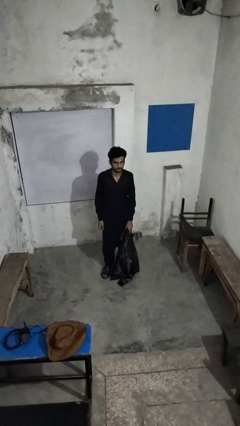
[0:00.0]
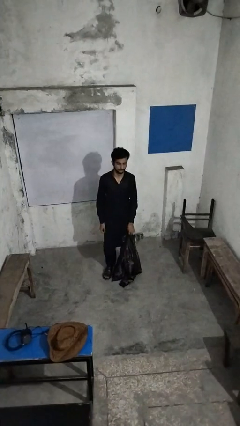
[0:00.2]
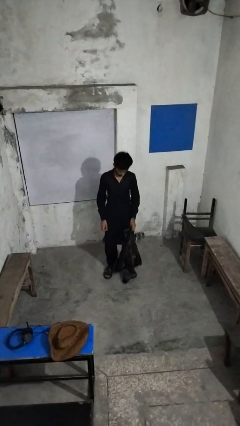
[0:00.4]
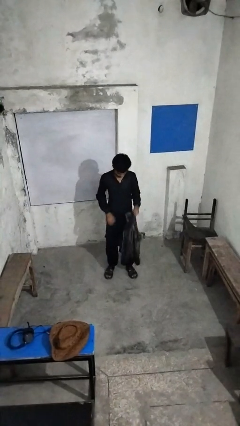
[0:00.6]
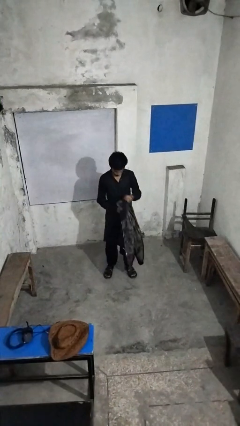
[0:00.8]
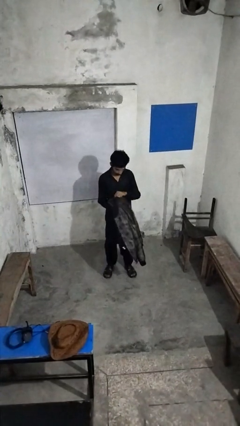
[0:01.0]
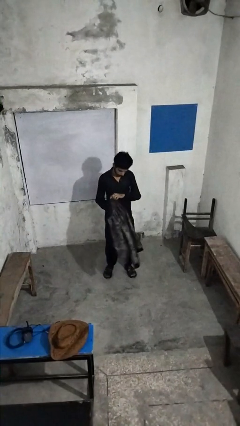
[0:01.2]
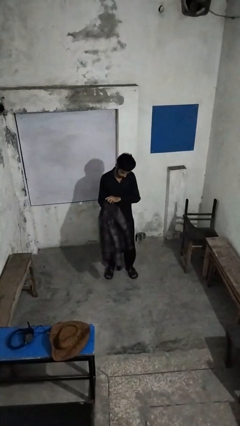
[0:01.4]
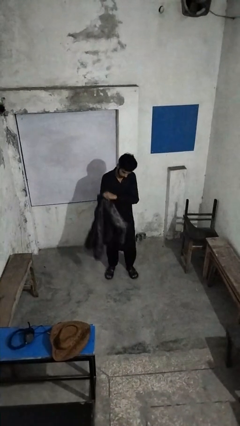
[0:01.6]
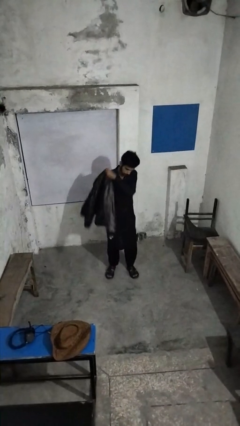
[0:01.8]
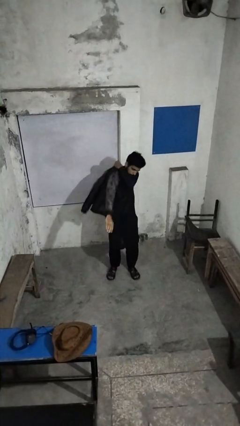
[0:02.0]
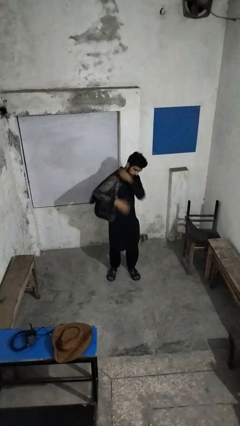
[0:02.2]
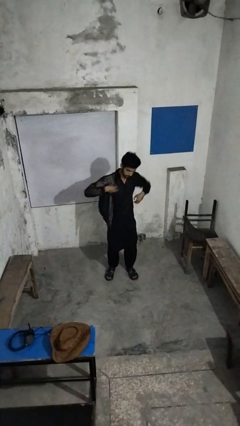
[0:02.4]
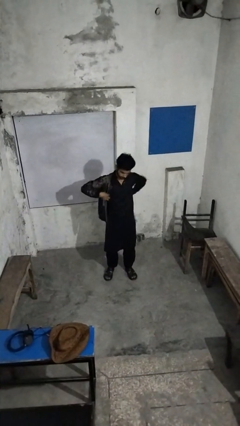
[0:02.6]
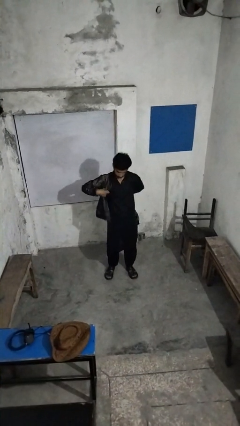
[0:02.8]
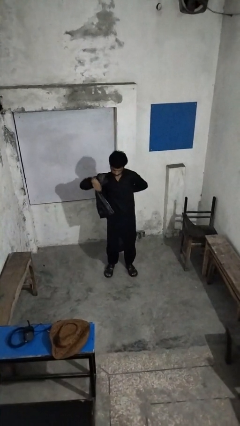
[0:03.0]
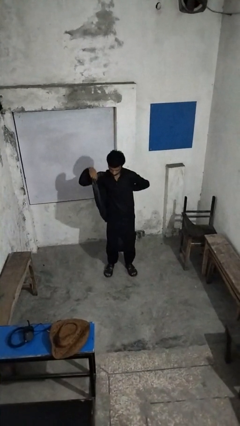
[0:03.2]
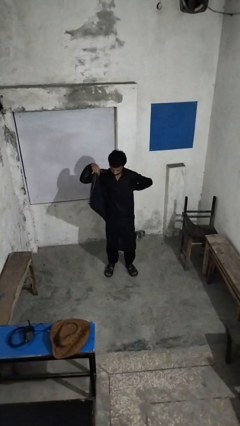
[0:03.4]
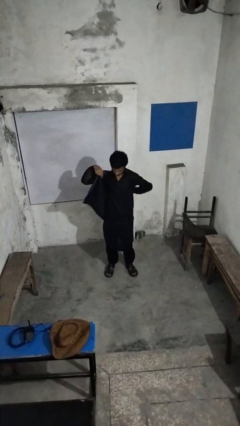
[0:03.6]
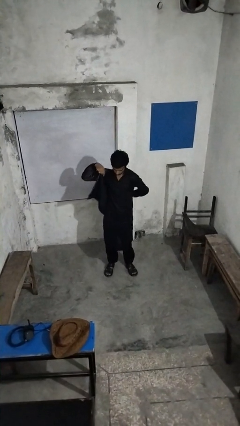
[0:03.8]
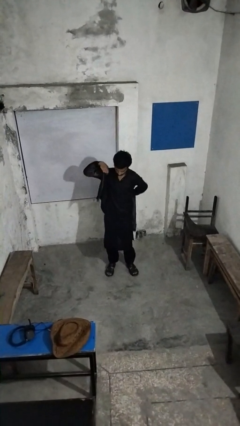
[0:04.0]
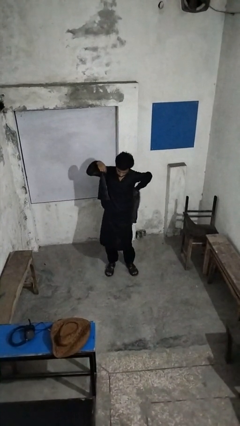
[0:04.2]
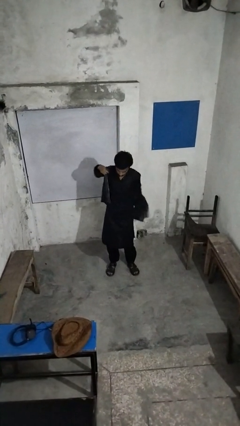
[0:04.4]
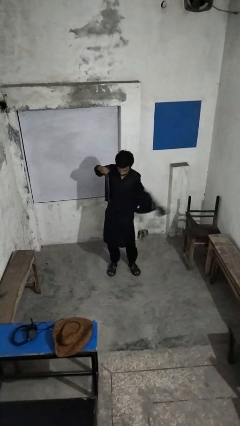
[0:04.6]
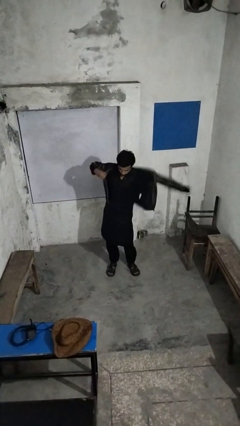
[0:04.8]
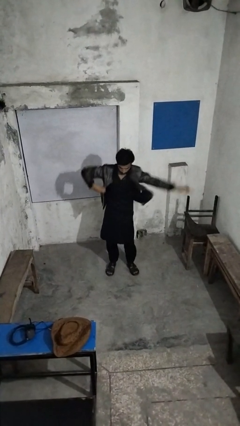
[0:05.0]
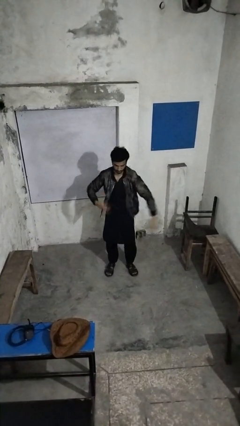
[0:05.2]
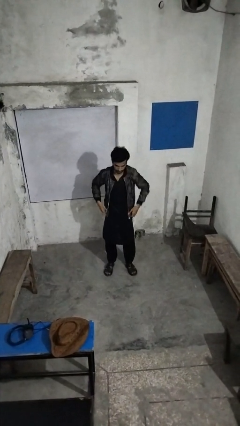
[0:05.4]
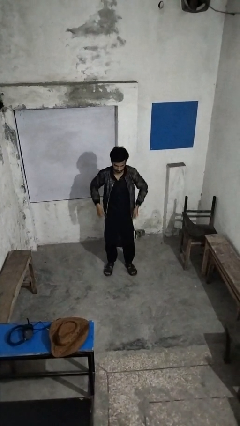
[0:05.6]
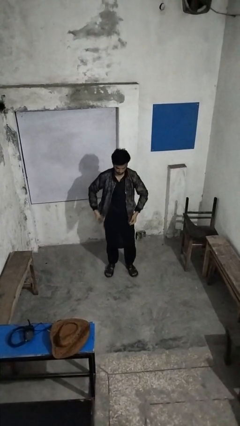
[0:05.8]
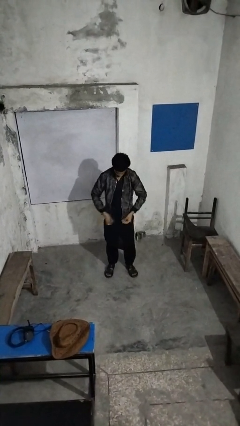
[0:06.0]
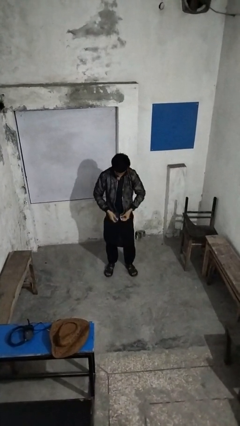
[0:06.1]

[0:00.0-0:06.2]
person puts on jacket

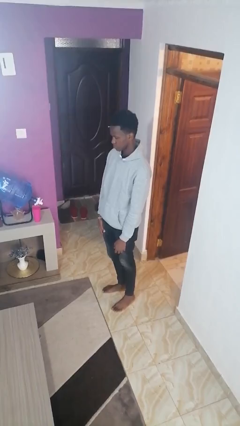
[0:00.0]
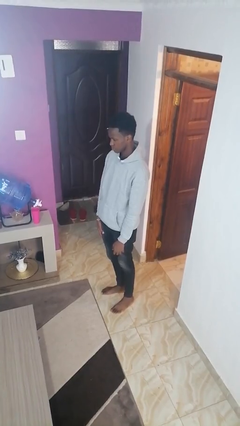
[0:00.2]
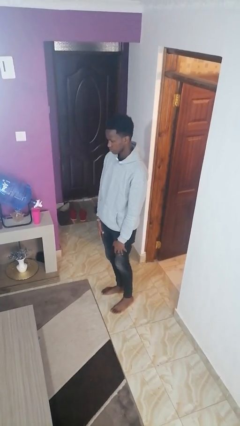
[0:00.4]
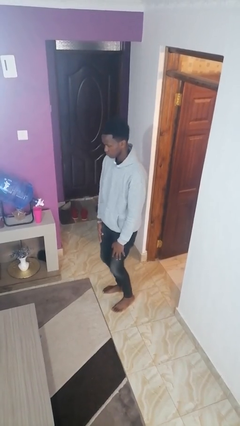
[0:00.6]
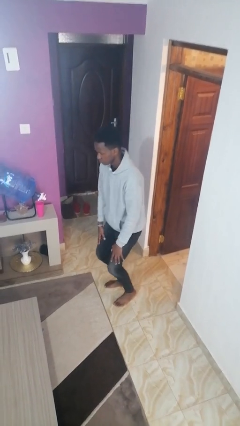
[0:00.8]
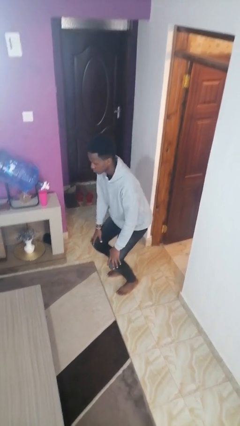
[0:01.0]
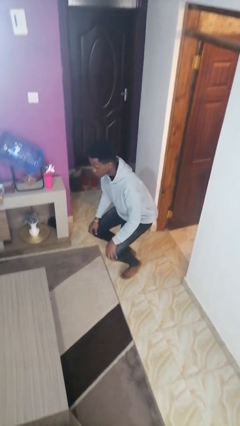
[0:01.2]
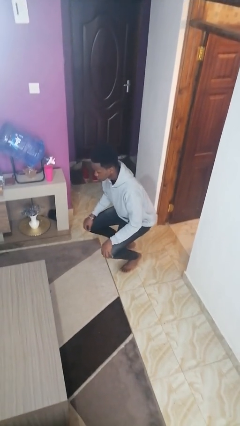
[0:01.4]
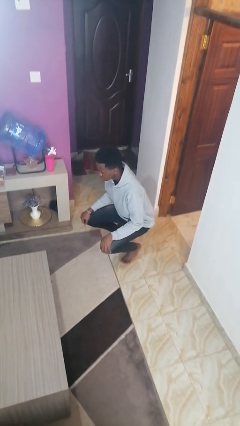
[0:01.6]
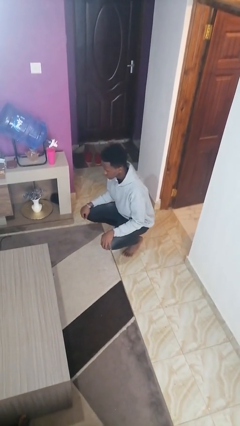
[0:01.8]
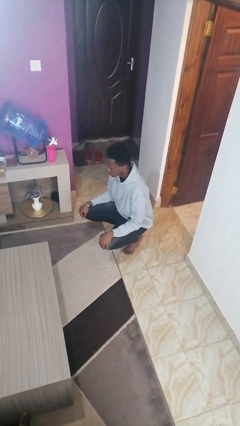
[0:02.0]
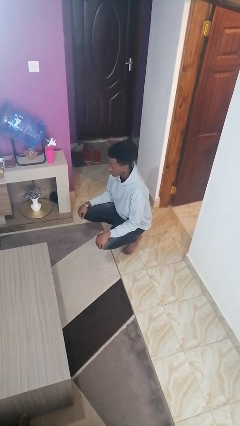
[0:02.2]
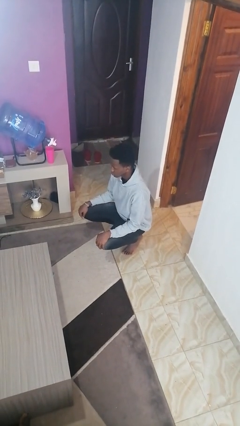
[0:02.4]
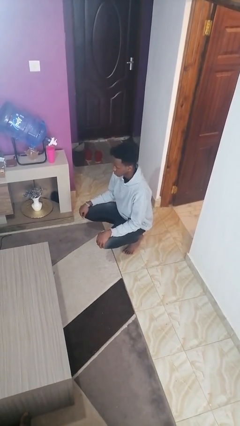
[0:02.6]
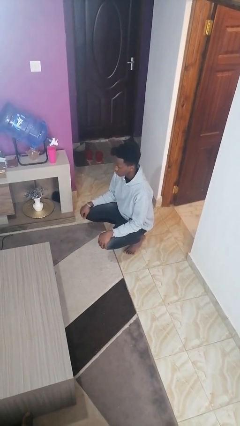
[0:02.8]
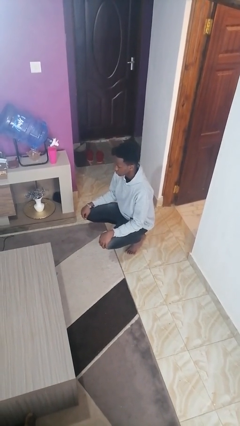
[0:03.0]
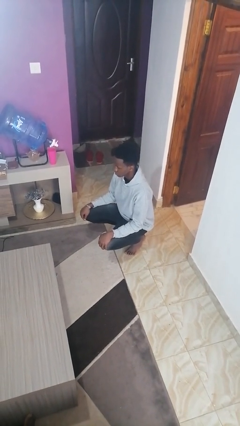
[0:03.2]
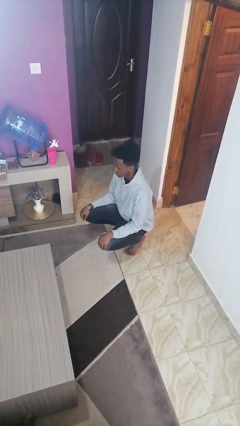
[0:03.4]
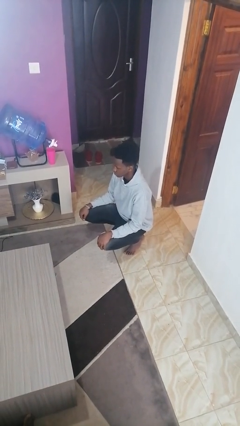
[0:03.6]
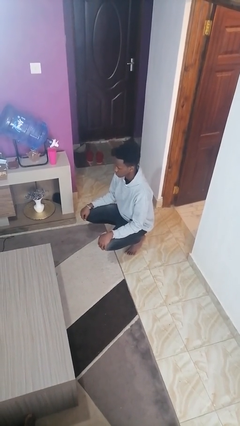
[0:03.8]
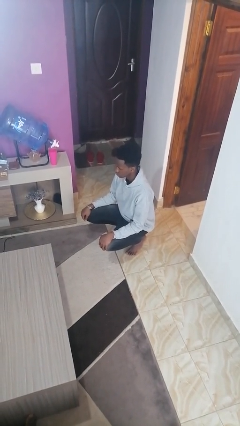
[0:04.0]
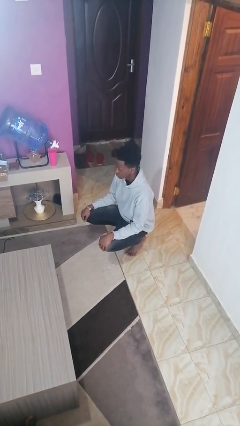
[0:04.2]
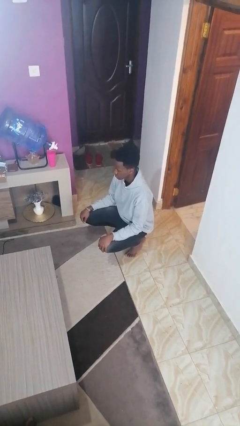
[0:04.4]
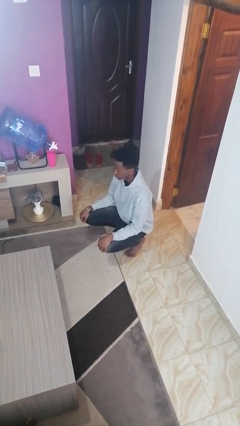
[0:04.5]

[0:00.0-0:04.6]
person squats

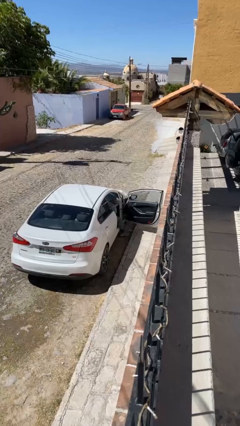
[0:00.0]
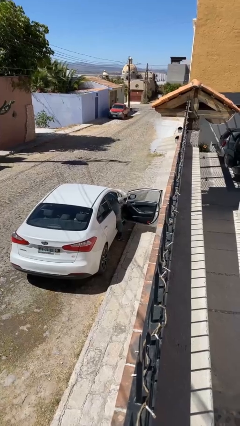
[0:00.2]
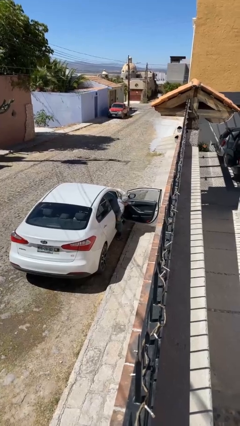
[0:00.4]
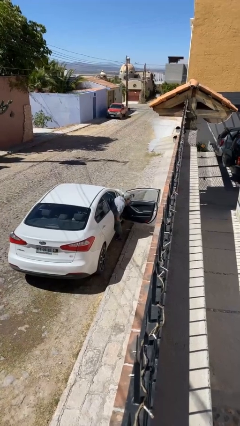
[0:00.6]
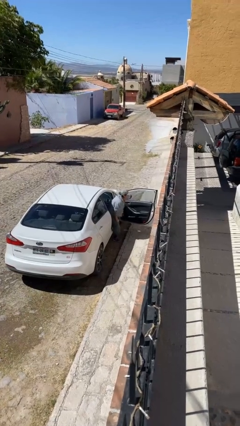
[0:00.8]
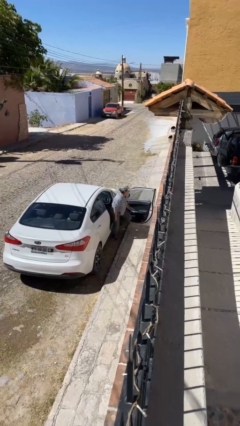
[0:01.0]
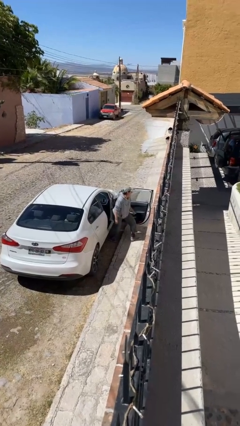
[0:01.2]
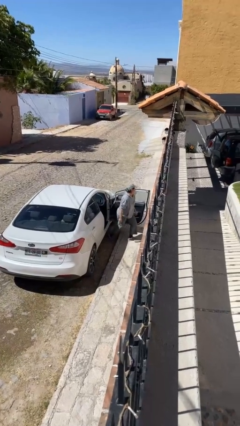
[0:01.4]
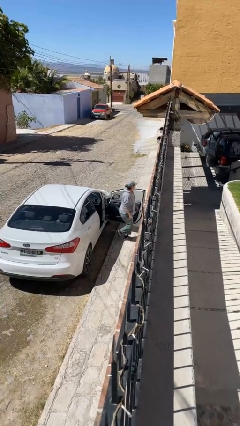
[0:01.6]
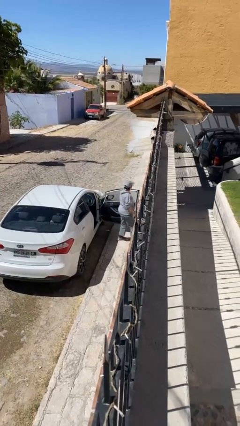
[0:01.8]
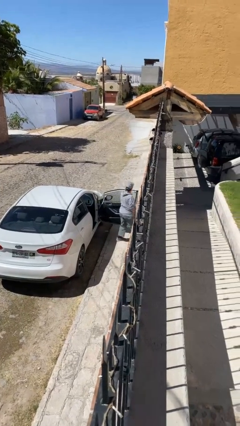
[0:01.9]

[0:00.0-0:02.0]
person exits car

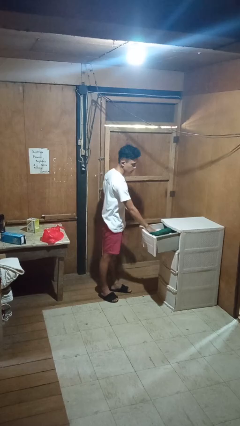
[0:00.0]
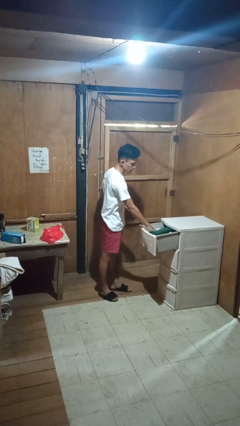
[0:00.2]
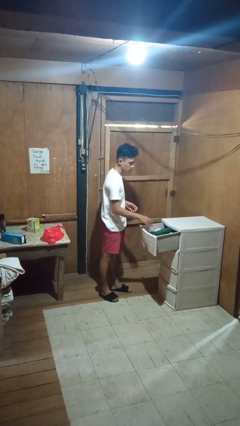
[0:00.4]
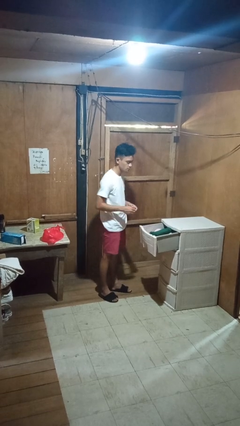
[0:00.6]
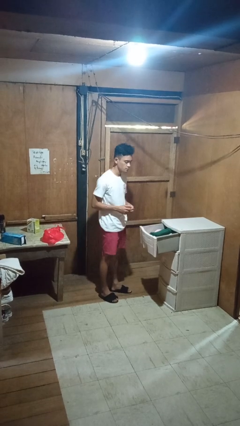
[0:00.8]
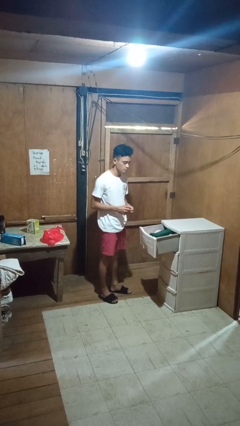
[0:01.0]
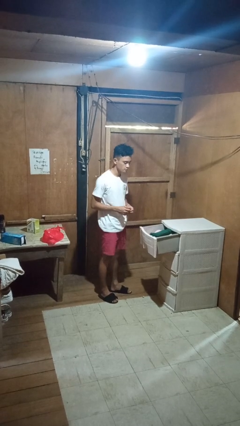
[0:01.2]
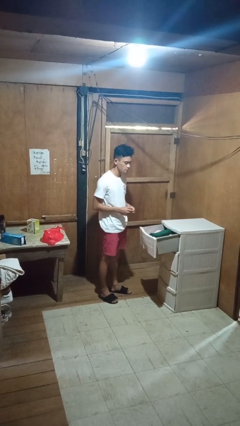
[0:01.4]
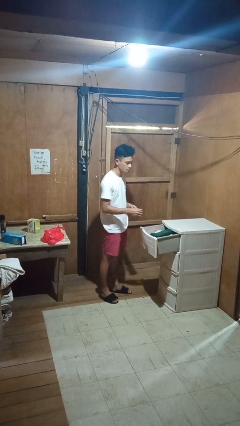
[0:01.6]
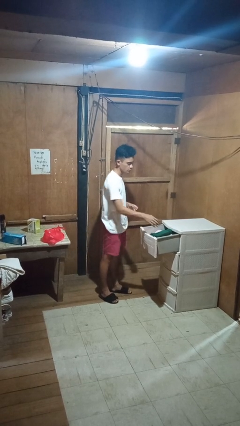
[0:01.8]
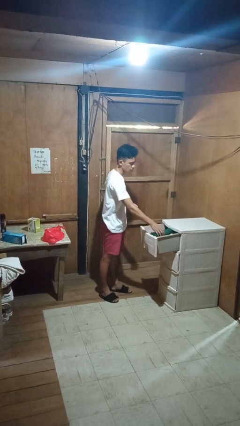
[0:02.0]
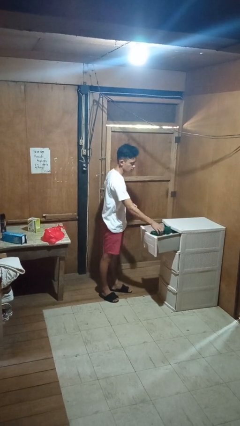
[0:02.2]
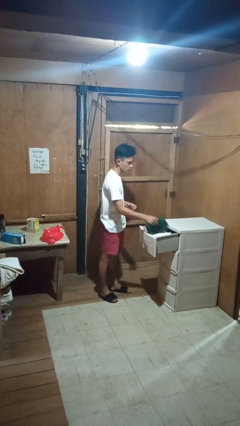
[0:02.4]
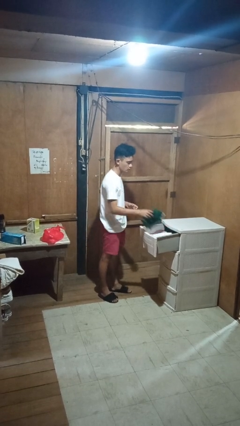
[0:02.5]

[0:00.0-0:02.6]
person puts clothes into dresser

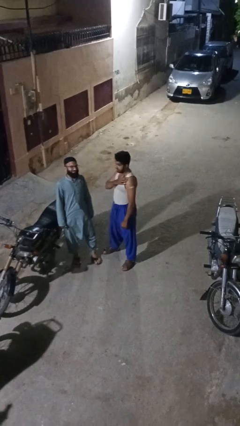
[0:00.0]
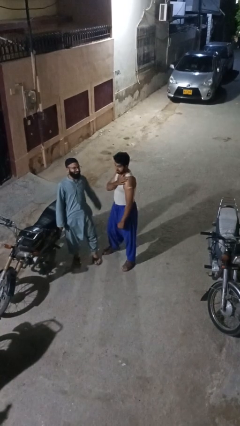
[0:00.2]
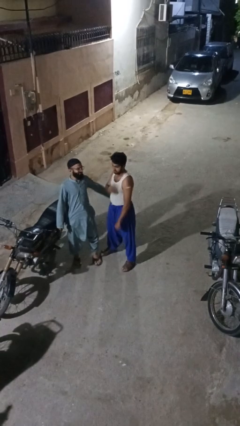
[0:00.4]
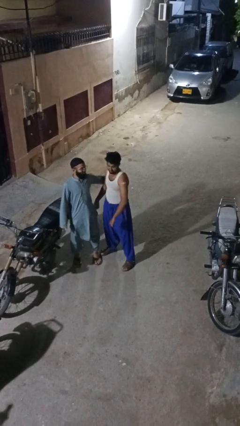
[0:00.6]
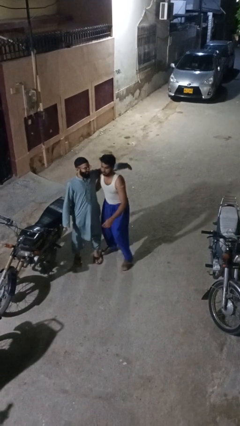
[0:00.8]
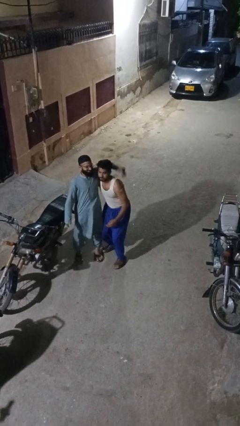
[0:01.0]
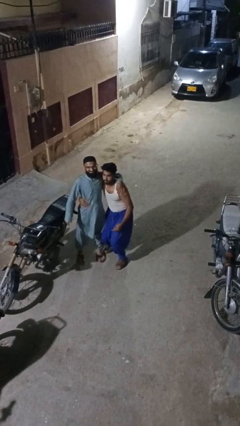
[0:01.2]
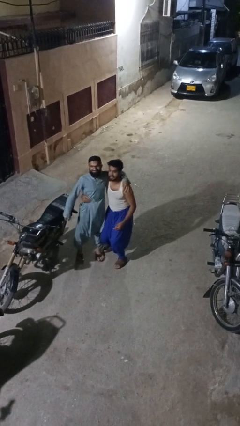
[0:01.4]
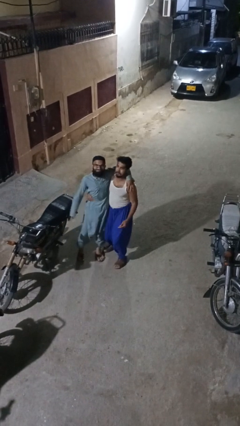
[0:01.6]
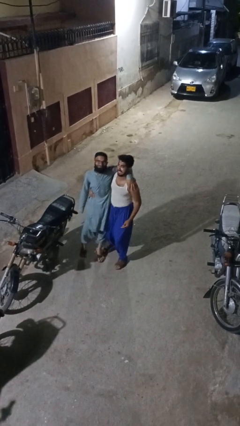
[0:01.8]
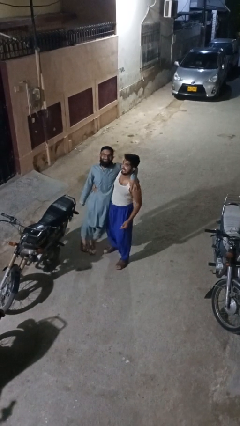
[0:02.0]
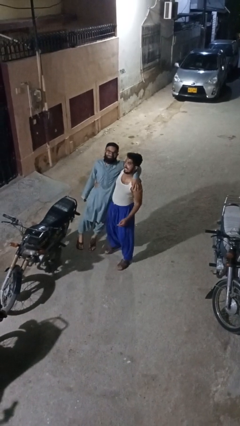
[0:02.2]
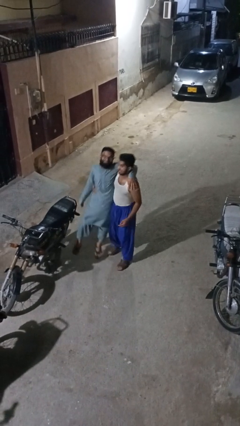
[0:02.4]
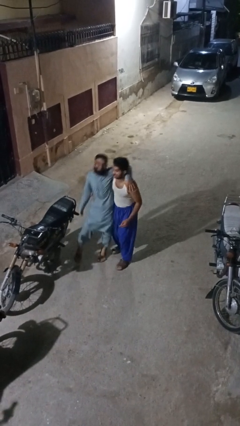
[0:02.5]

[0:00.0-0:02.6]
person picks up person
